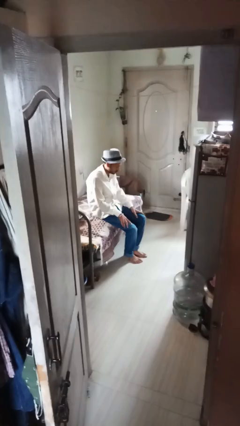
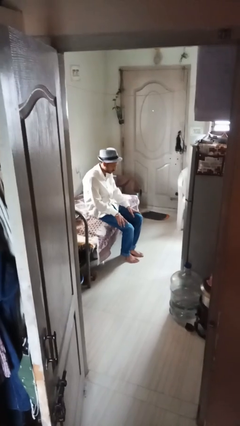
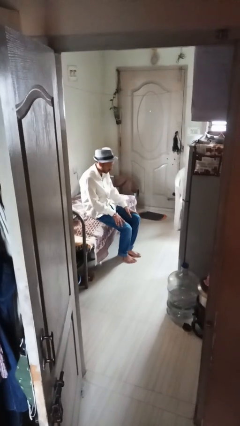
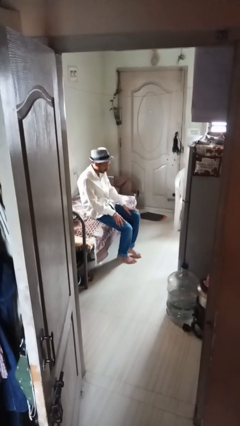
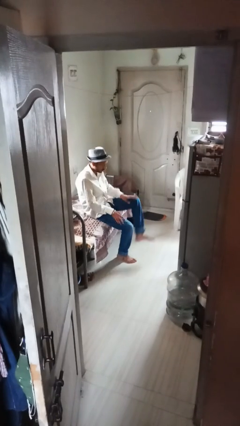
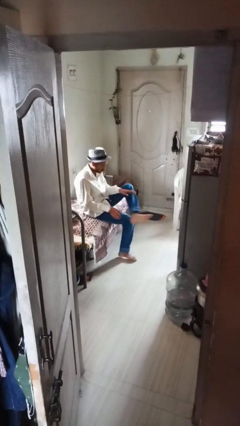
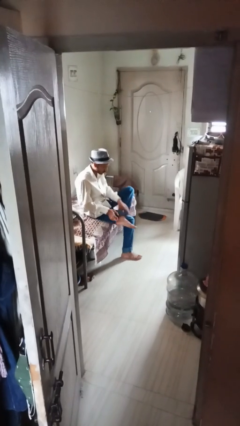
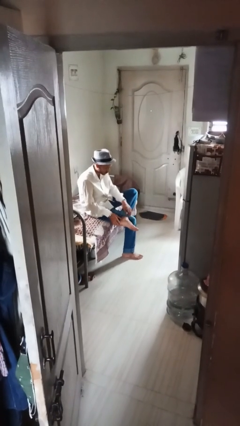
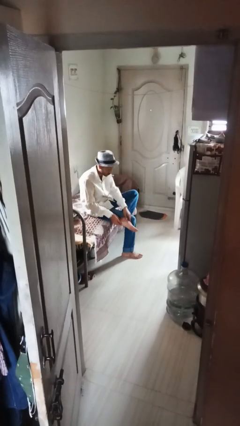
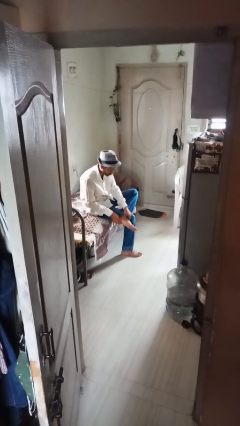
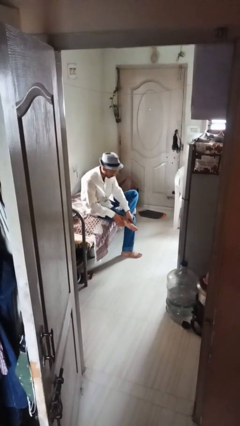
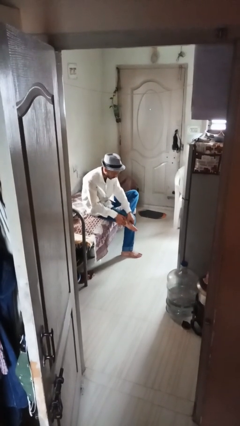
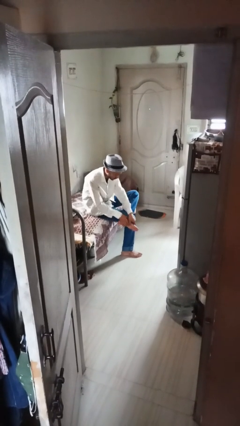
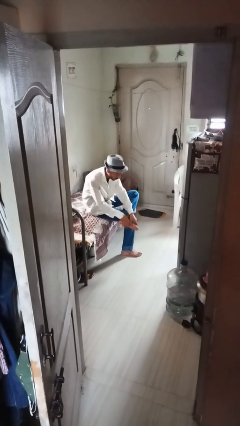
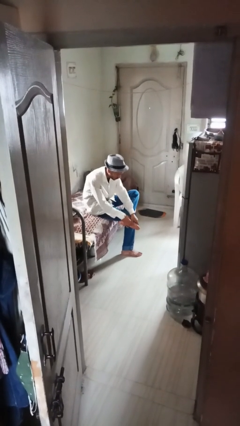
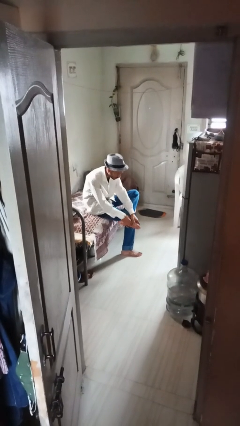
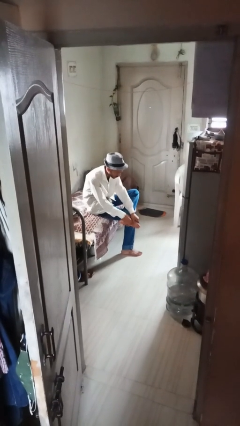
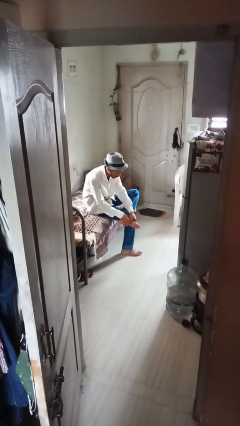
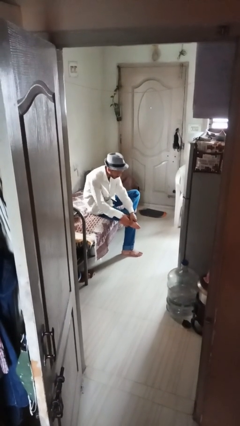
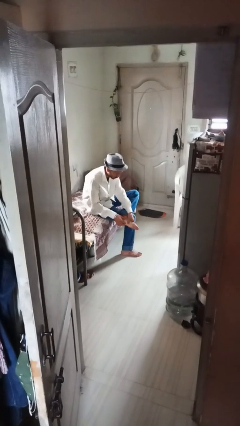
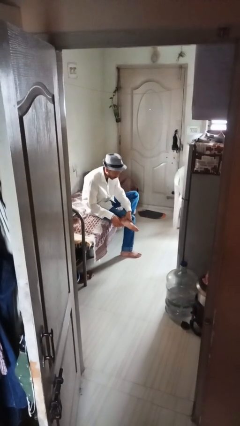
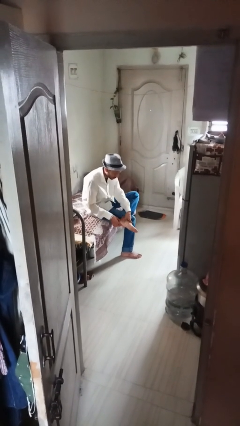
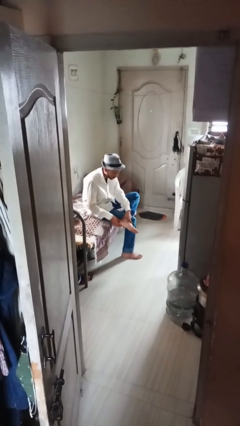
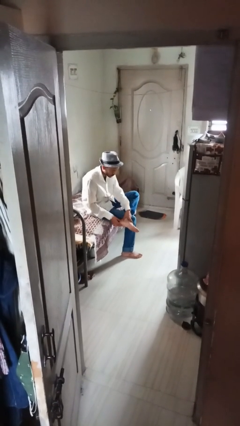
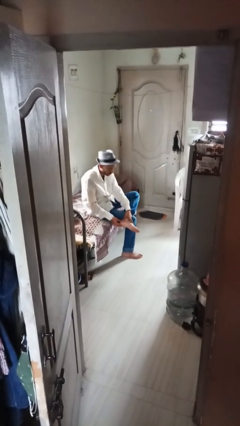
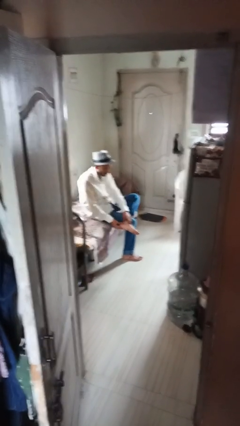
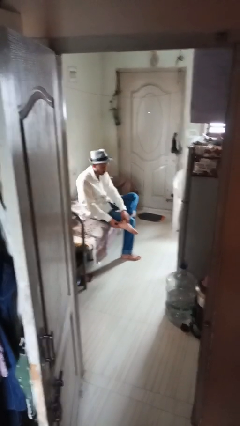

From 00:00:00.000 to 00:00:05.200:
person rubs foot

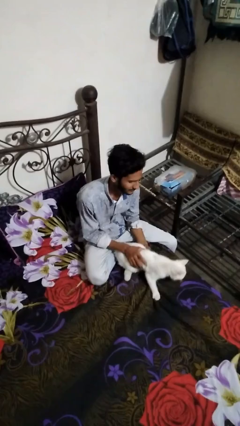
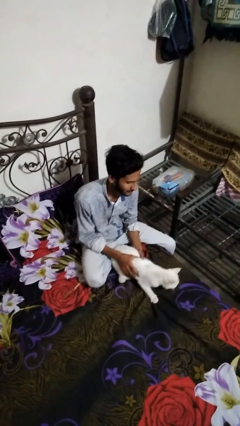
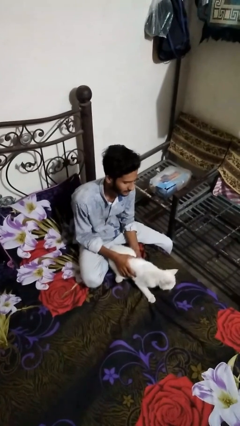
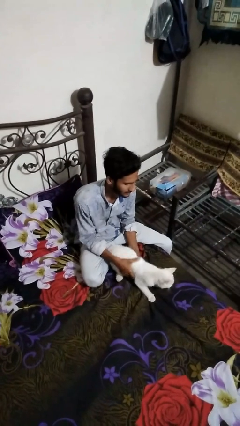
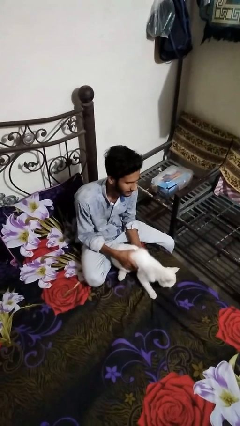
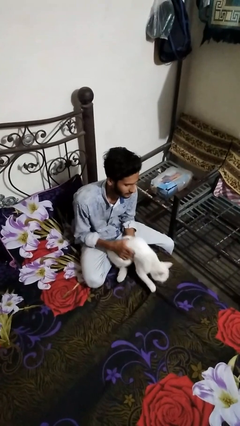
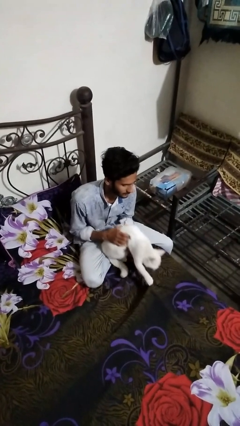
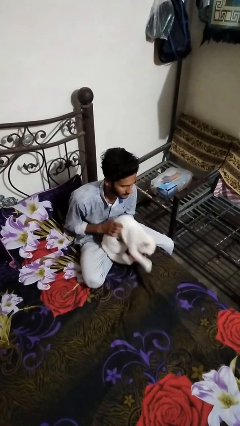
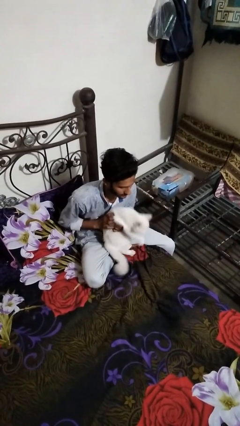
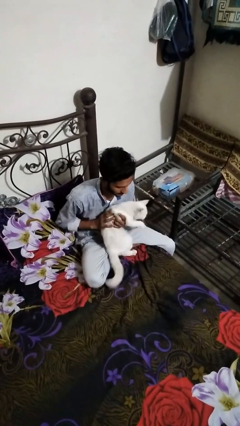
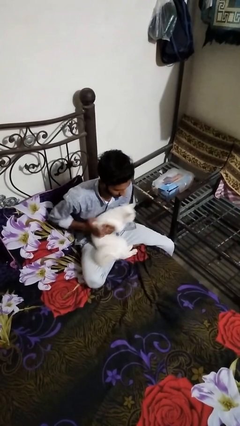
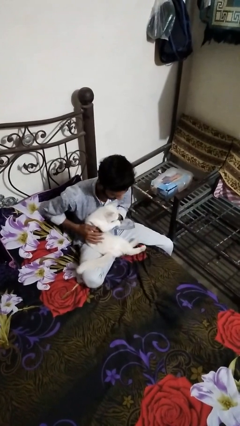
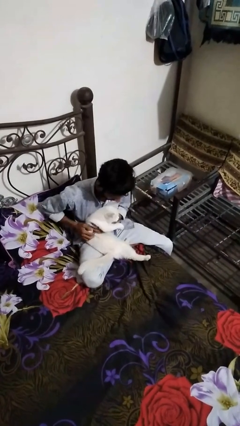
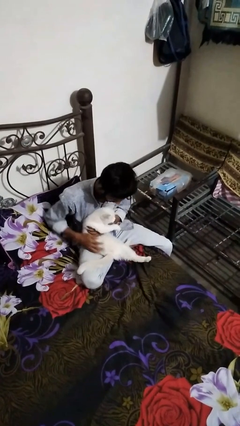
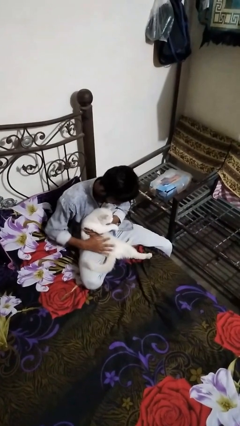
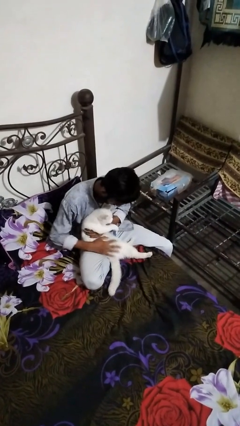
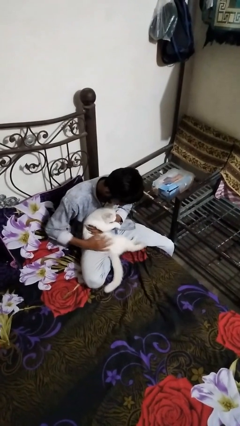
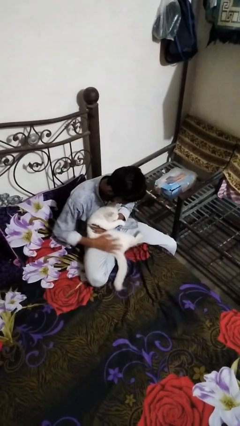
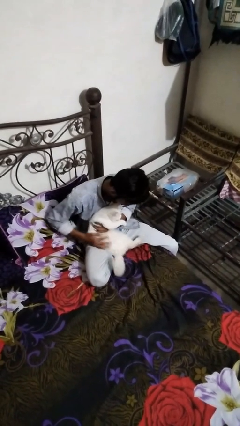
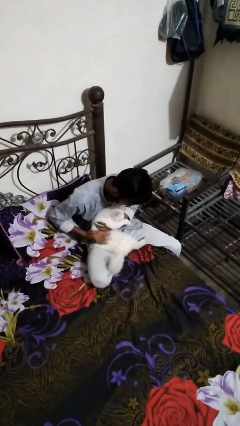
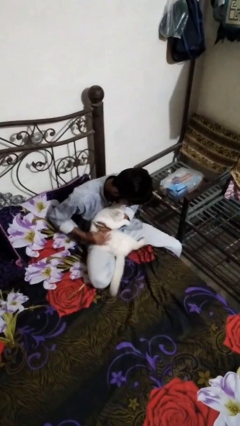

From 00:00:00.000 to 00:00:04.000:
person pets cat

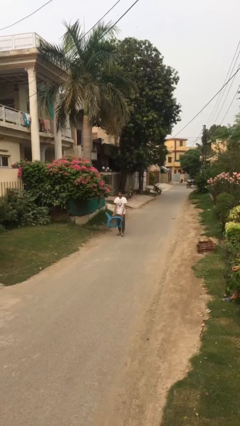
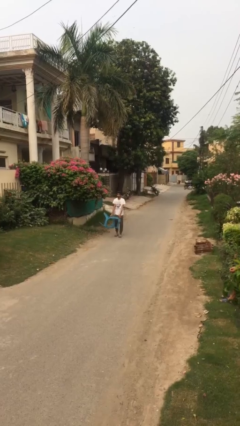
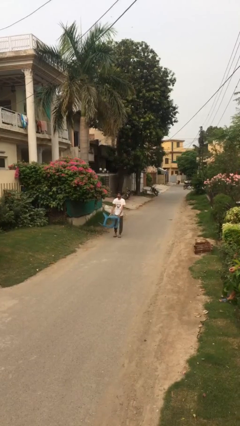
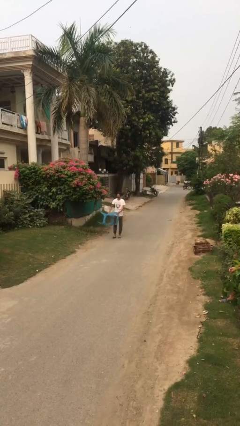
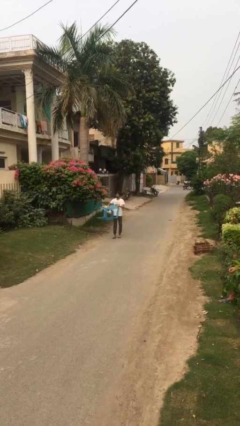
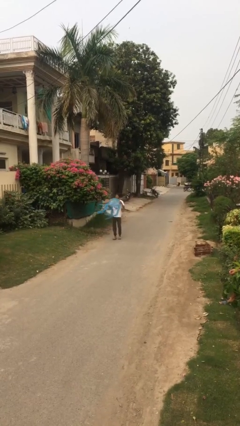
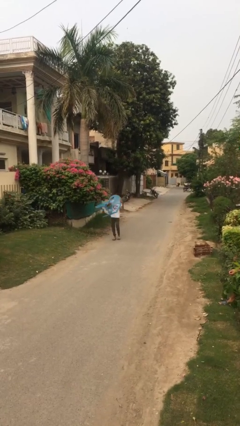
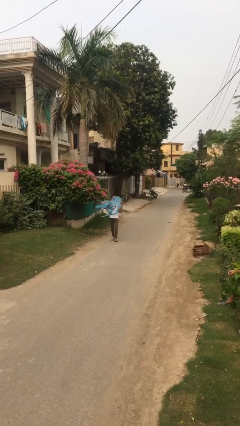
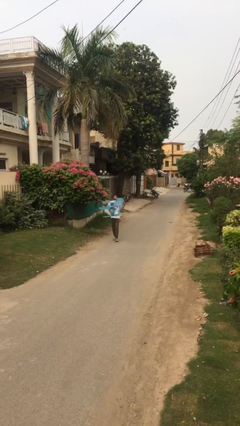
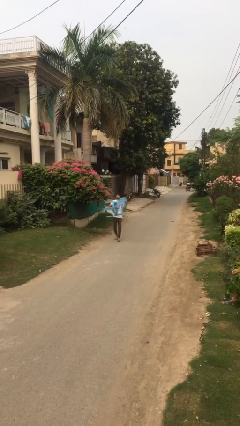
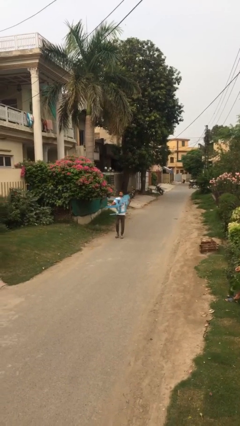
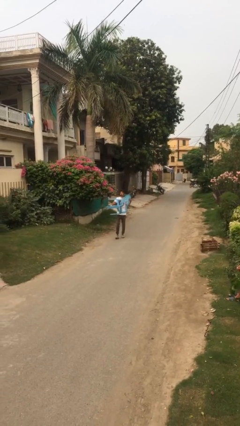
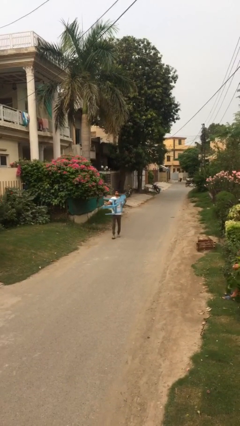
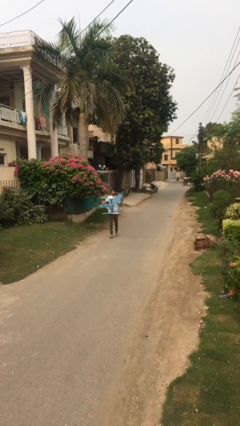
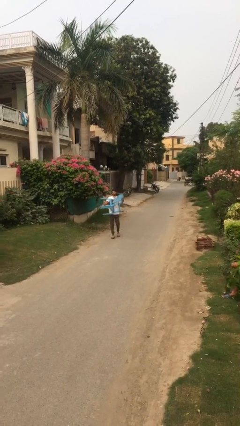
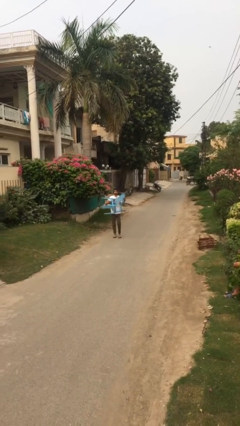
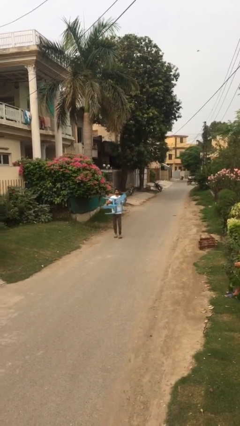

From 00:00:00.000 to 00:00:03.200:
person carries heavy object

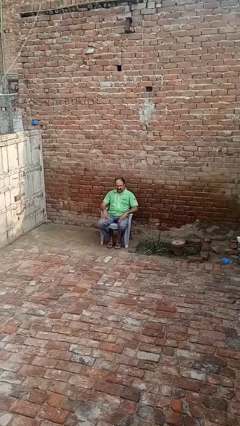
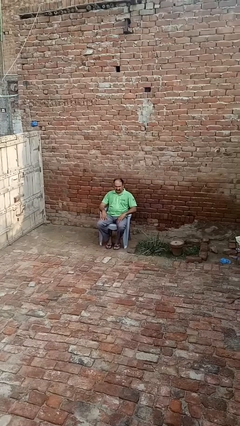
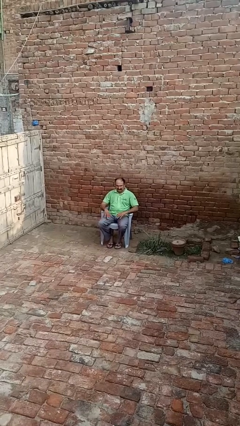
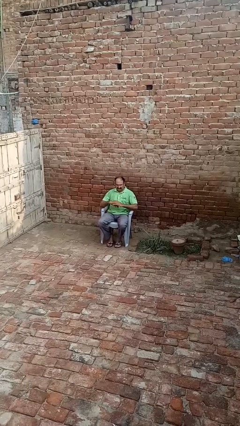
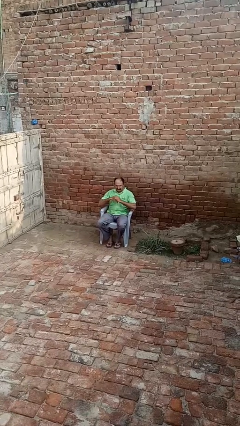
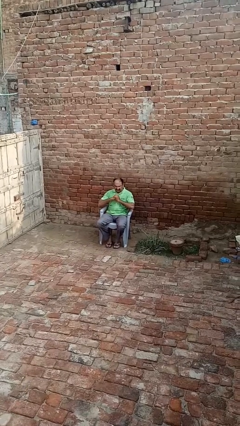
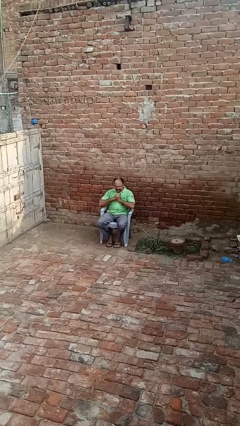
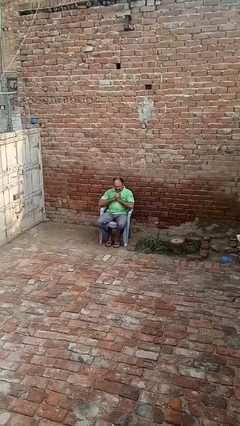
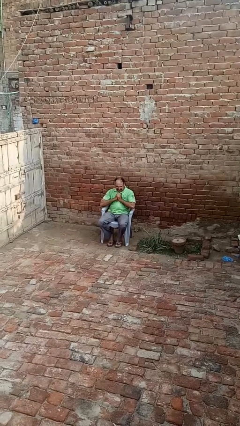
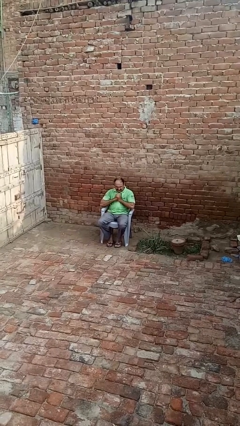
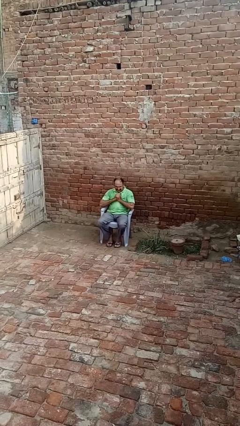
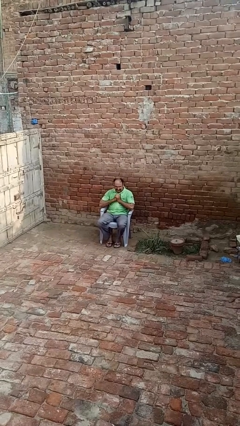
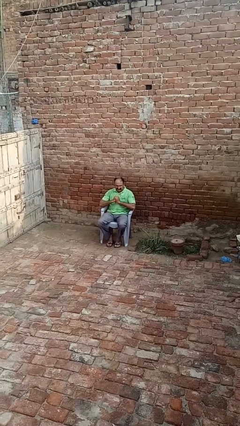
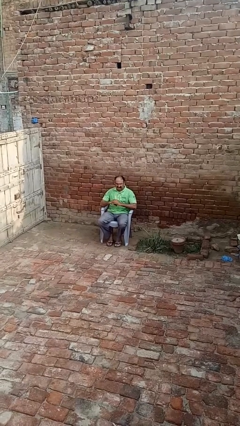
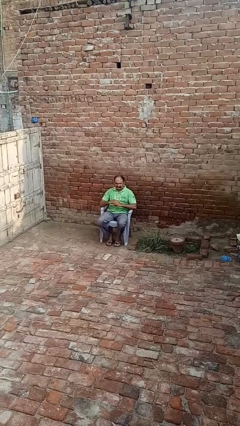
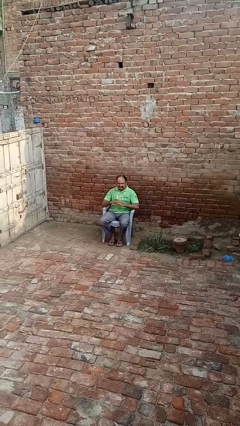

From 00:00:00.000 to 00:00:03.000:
person cracks knuckles

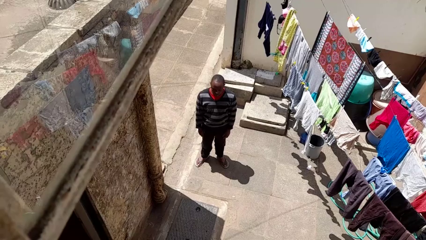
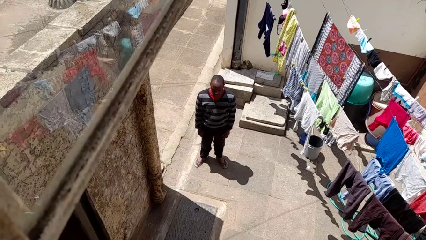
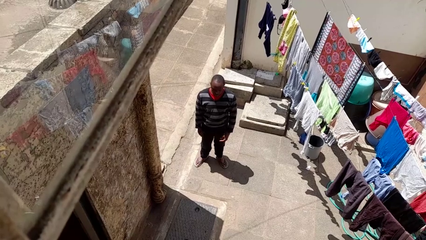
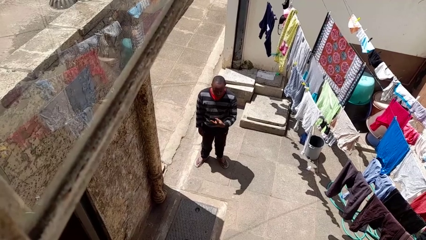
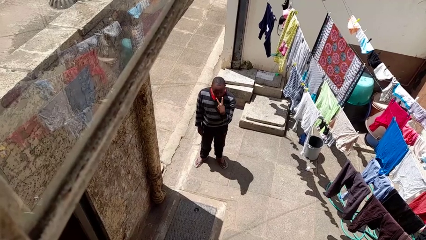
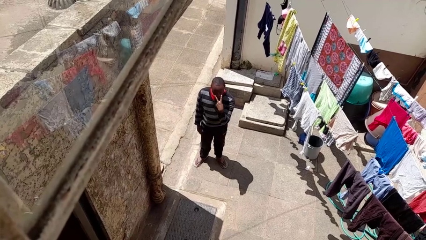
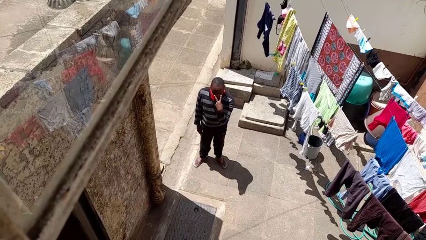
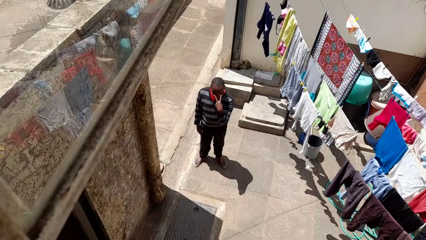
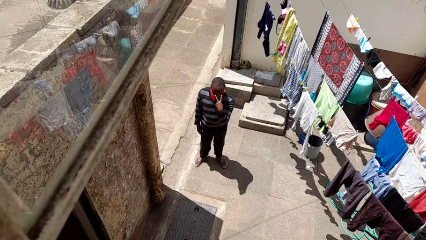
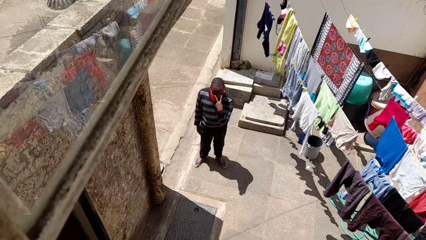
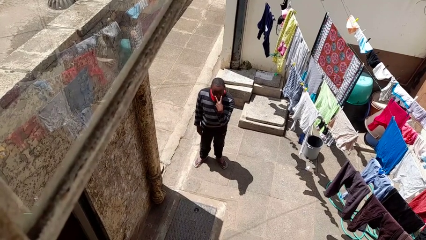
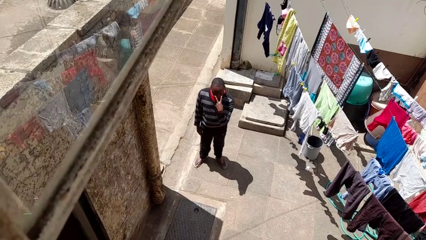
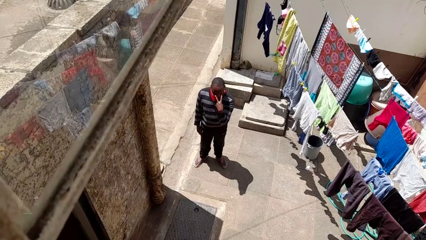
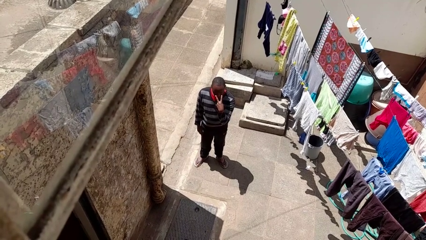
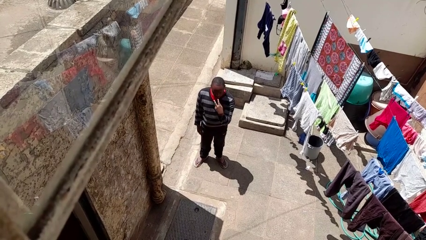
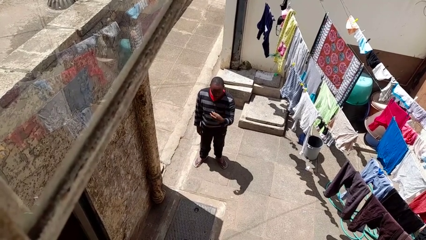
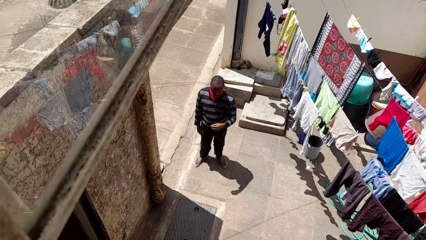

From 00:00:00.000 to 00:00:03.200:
person gestures watch closely
